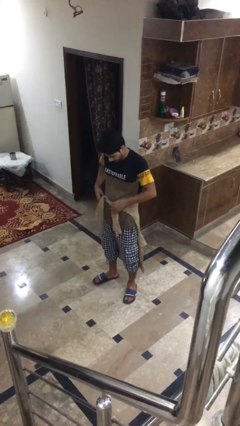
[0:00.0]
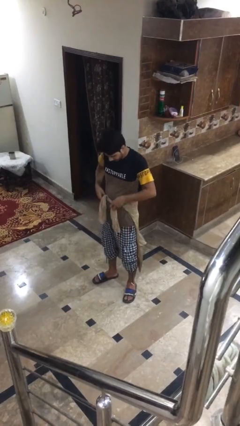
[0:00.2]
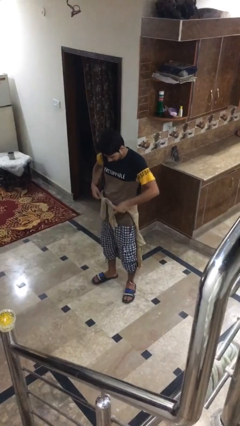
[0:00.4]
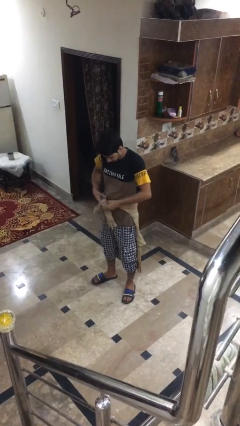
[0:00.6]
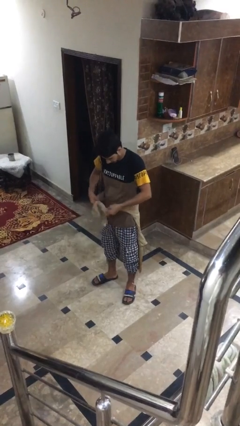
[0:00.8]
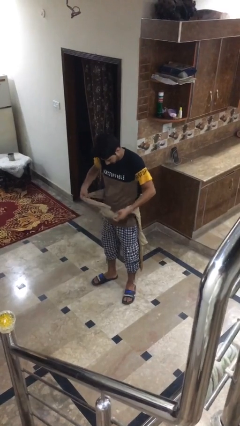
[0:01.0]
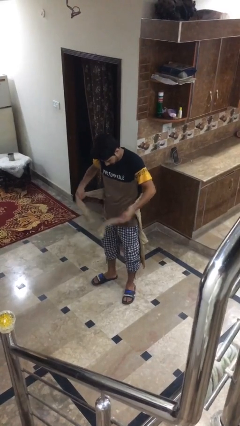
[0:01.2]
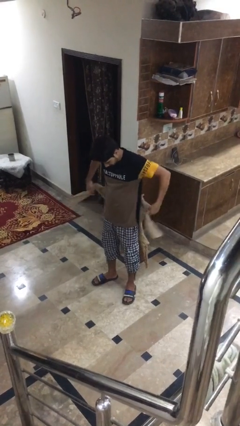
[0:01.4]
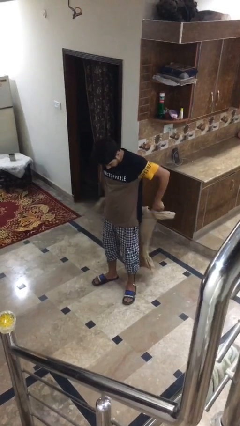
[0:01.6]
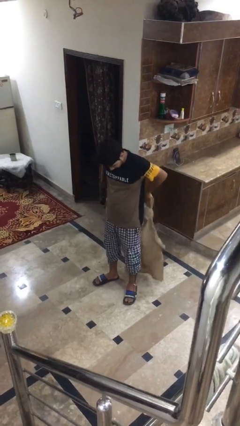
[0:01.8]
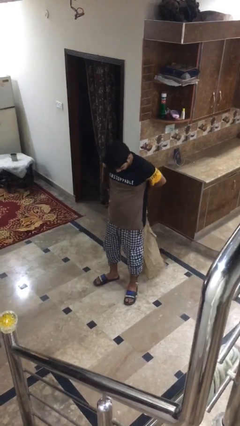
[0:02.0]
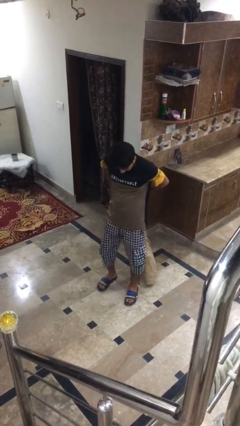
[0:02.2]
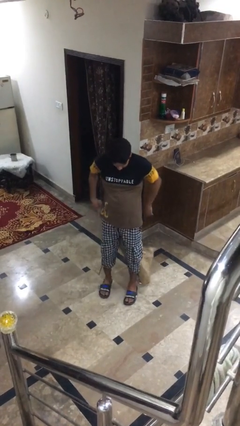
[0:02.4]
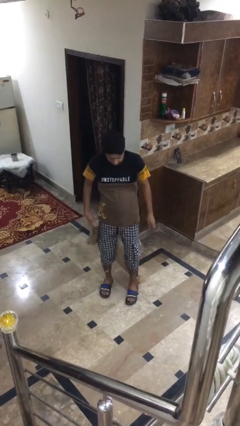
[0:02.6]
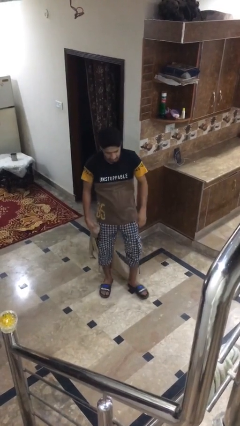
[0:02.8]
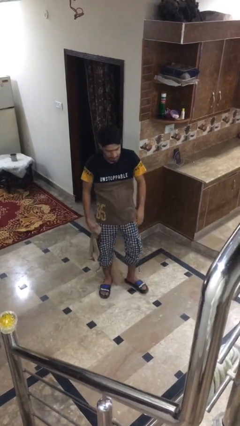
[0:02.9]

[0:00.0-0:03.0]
person unties jacket around waist

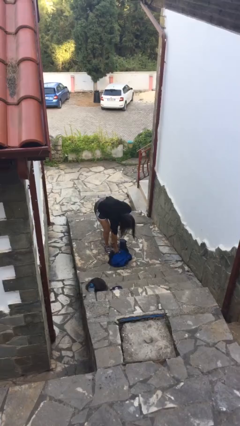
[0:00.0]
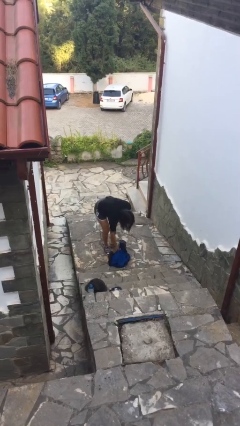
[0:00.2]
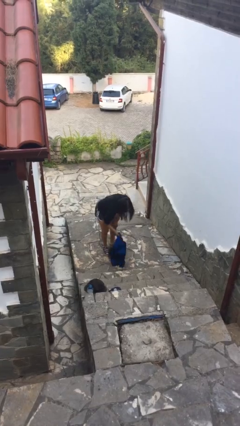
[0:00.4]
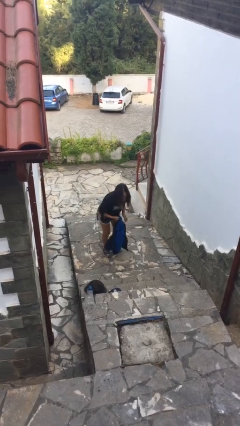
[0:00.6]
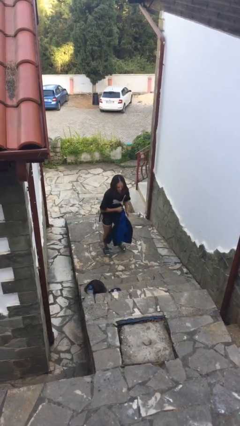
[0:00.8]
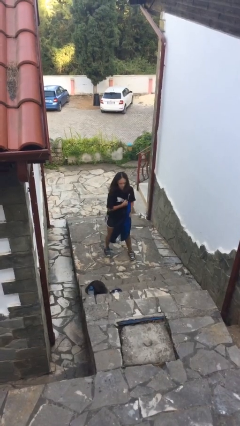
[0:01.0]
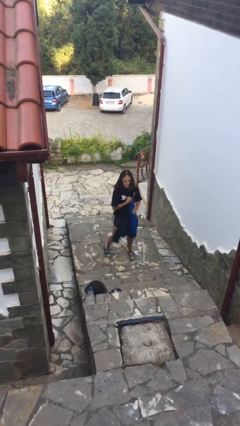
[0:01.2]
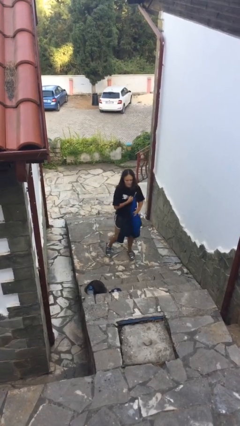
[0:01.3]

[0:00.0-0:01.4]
person picks up object from floor

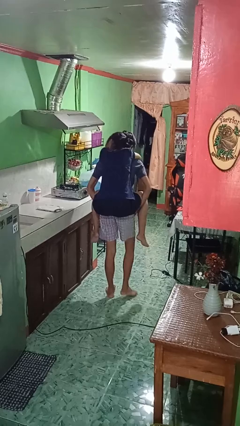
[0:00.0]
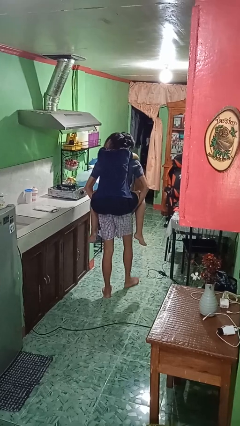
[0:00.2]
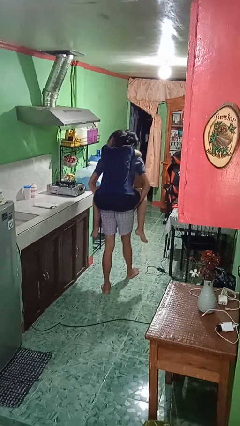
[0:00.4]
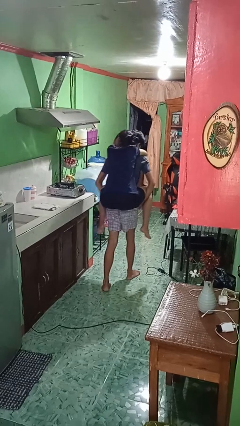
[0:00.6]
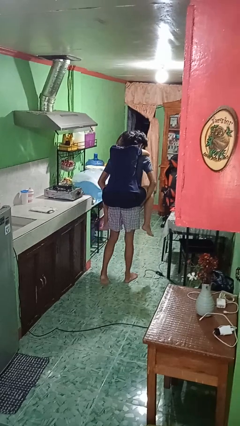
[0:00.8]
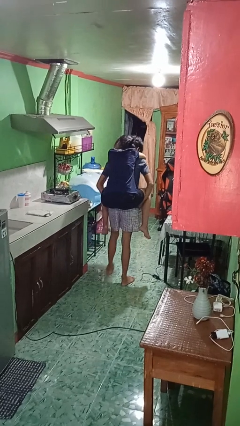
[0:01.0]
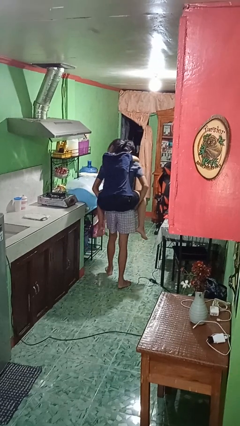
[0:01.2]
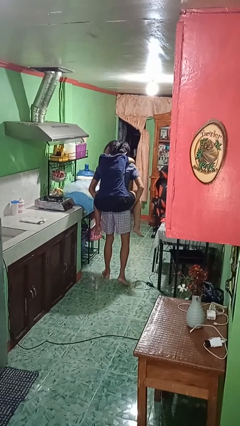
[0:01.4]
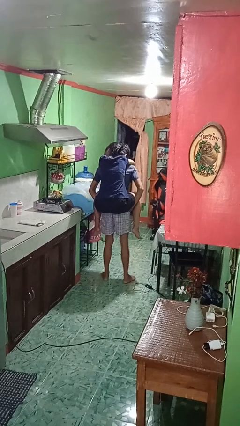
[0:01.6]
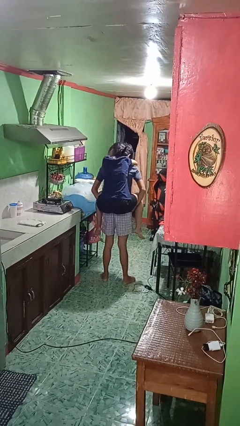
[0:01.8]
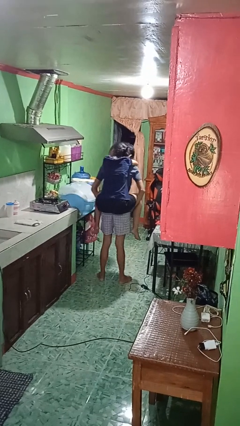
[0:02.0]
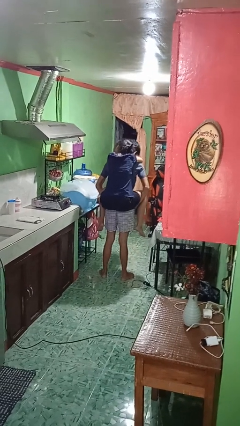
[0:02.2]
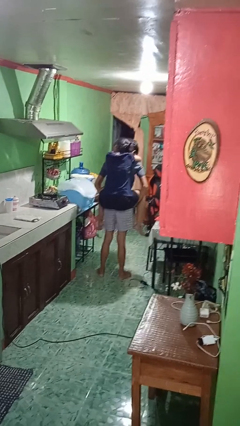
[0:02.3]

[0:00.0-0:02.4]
person carries person on back

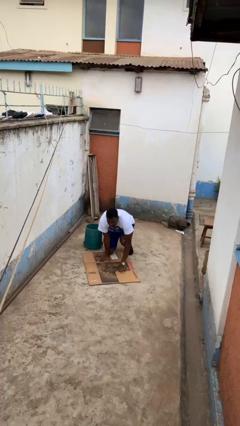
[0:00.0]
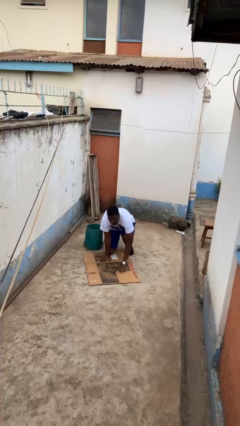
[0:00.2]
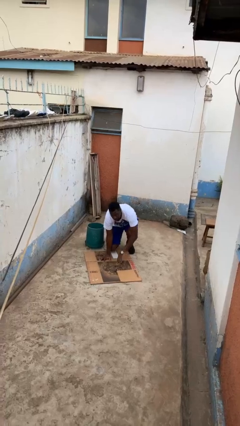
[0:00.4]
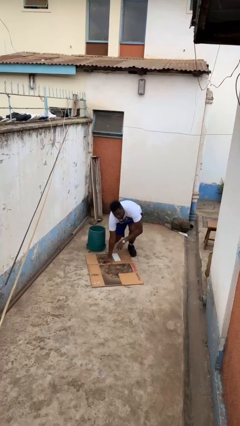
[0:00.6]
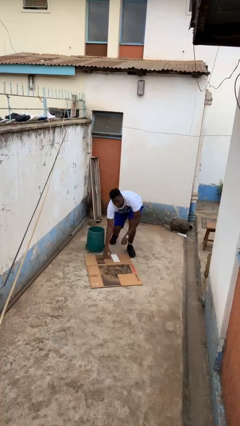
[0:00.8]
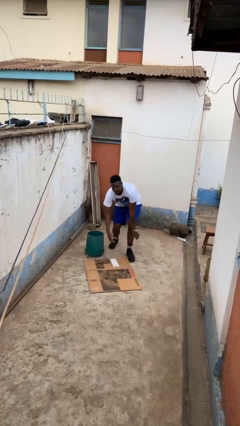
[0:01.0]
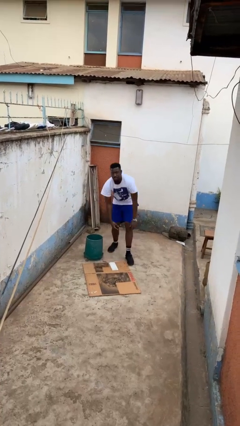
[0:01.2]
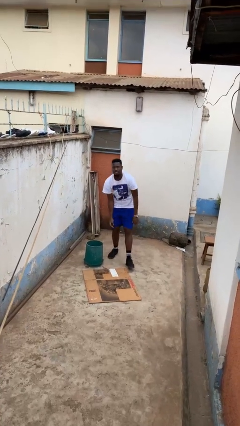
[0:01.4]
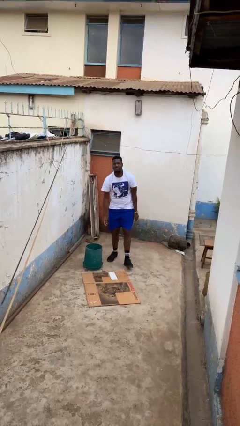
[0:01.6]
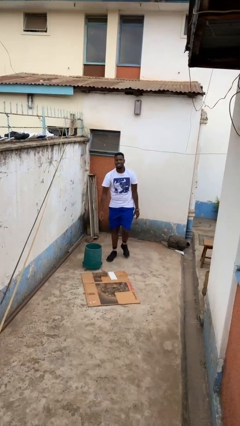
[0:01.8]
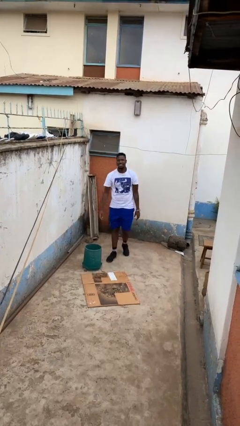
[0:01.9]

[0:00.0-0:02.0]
person stands up from floor

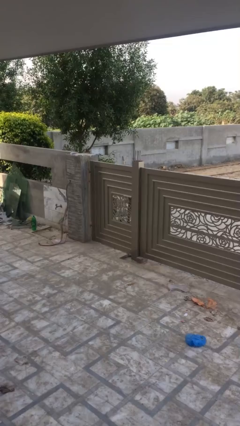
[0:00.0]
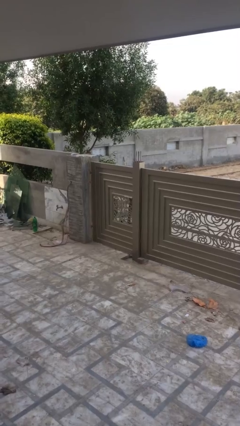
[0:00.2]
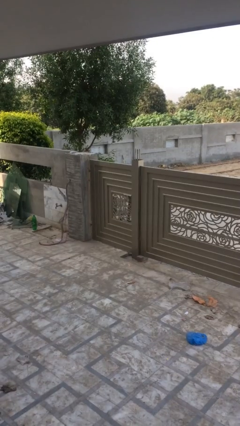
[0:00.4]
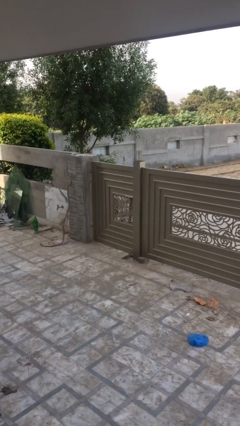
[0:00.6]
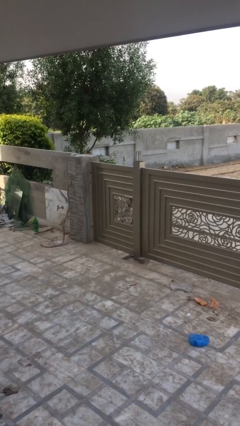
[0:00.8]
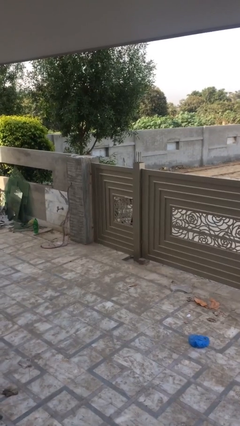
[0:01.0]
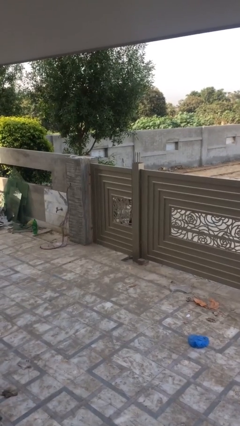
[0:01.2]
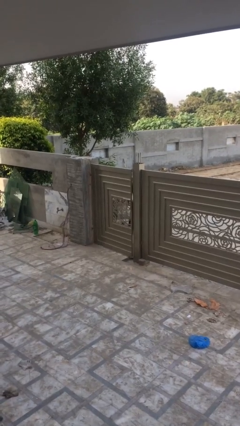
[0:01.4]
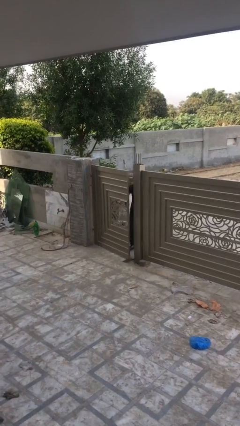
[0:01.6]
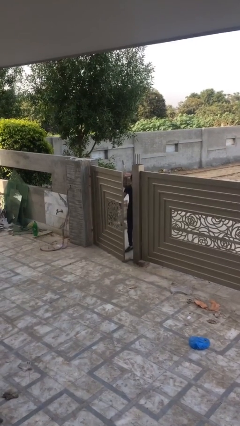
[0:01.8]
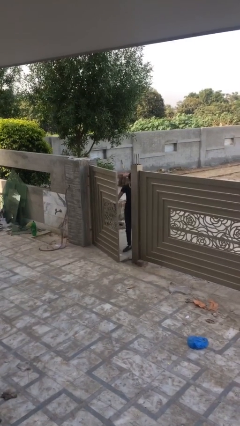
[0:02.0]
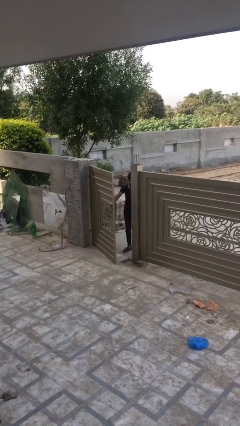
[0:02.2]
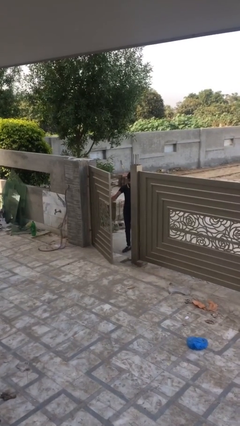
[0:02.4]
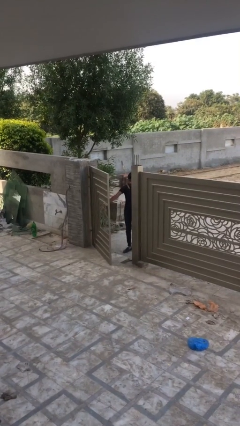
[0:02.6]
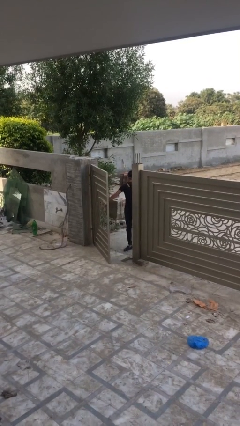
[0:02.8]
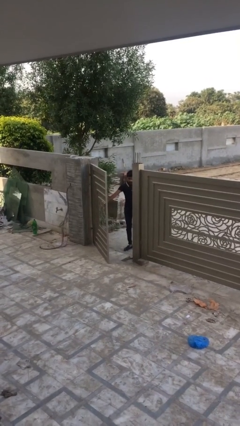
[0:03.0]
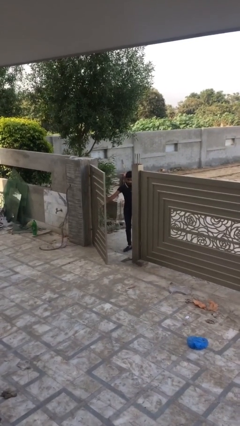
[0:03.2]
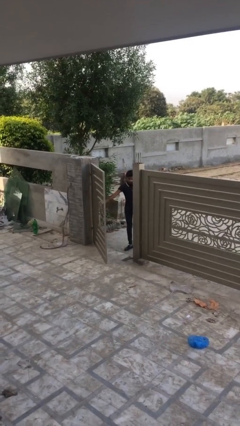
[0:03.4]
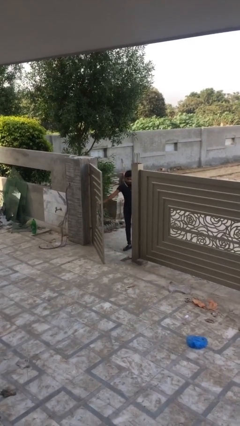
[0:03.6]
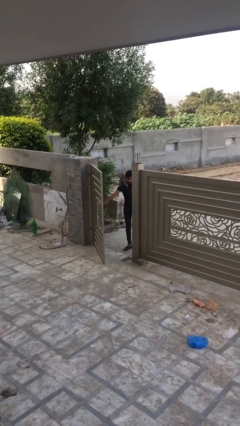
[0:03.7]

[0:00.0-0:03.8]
person opens facility door

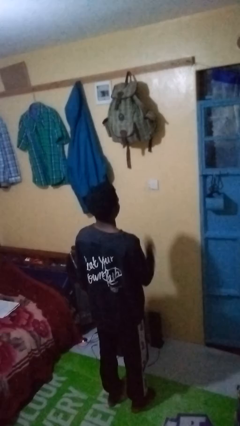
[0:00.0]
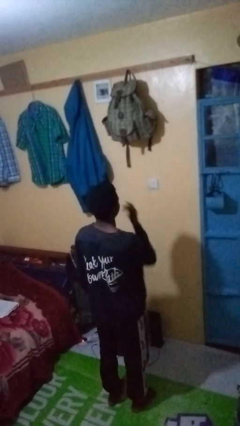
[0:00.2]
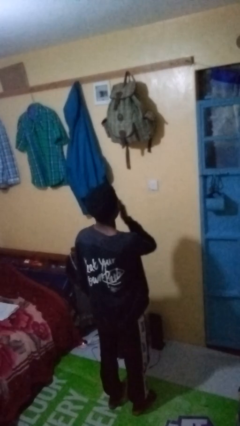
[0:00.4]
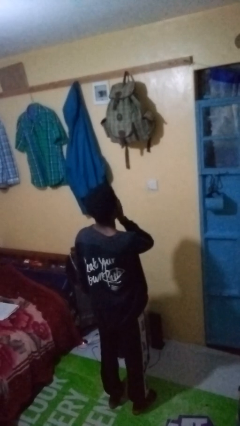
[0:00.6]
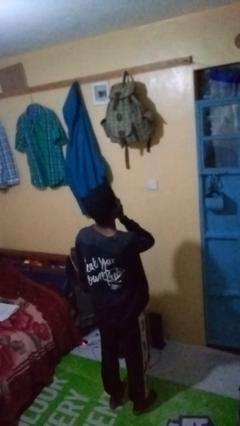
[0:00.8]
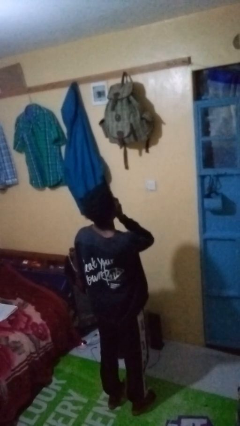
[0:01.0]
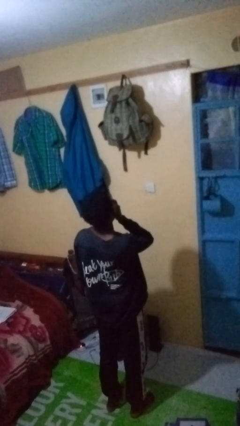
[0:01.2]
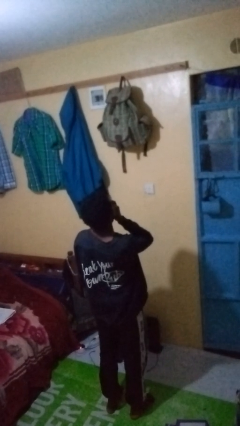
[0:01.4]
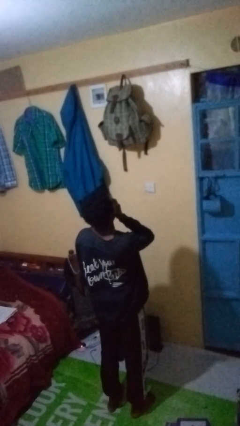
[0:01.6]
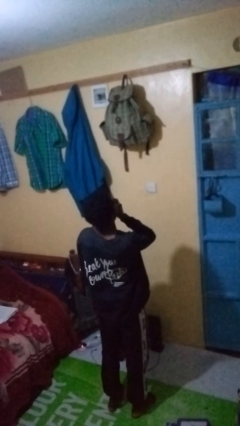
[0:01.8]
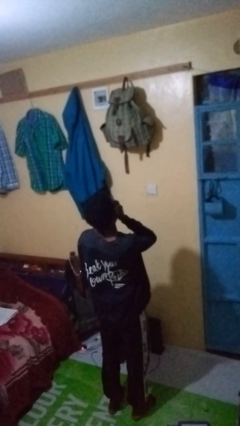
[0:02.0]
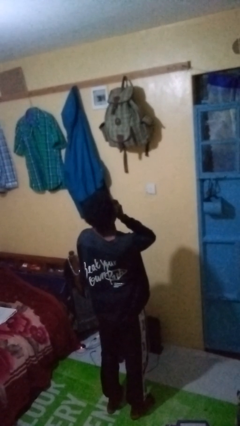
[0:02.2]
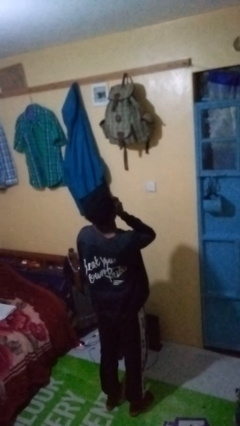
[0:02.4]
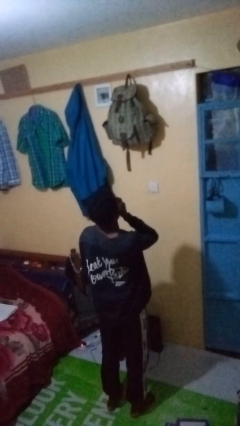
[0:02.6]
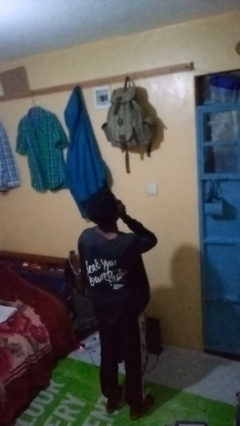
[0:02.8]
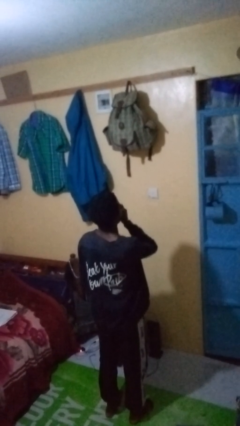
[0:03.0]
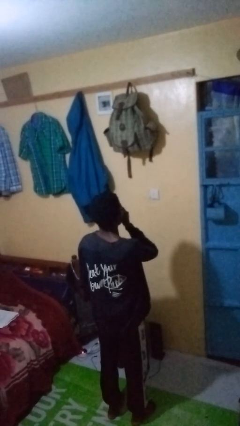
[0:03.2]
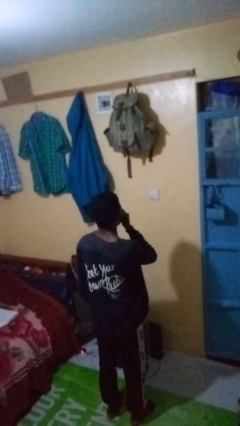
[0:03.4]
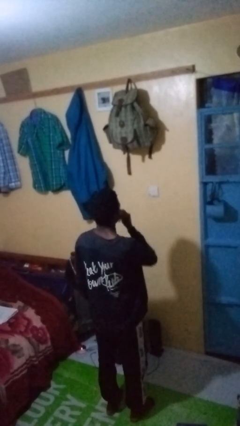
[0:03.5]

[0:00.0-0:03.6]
person yawns

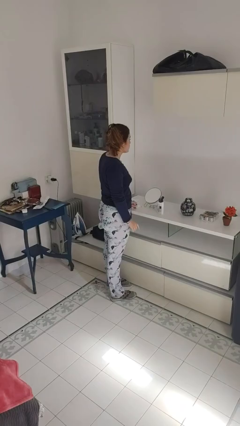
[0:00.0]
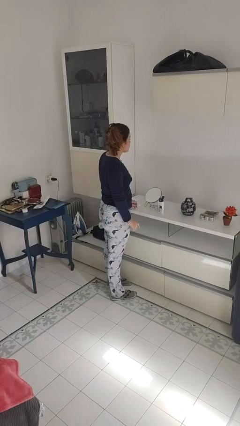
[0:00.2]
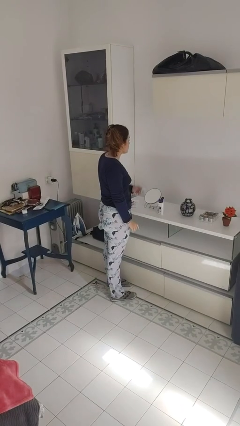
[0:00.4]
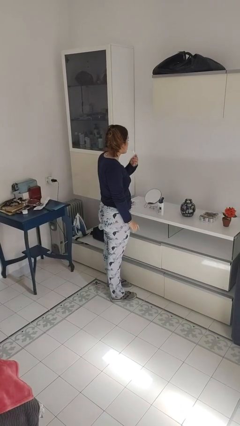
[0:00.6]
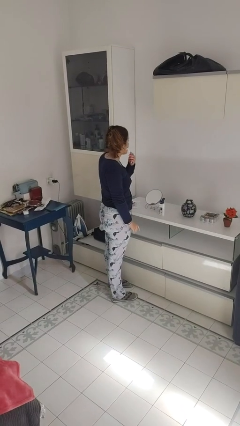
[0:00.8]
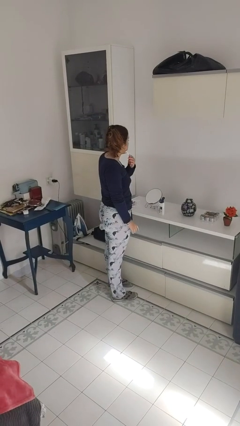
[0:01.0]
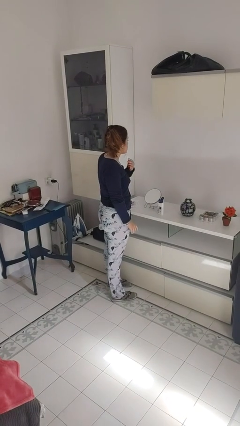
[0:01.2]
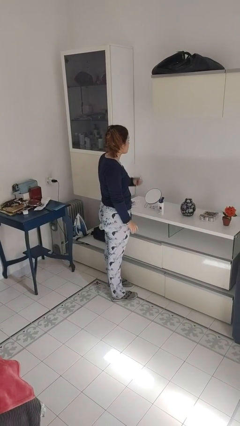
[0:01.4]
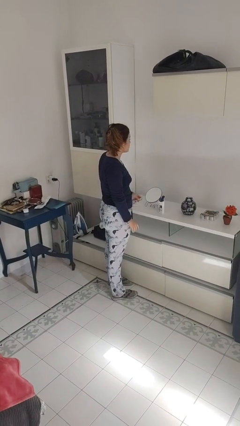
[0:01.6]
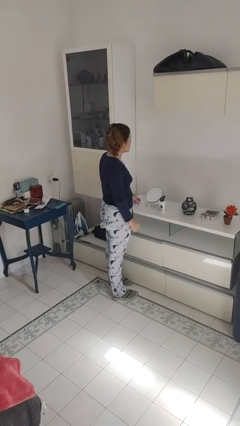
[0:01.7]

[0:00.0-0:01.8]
person shaves face
